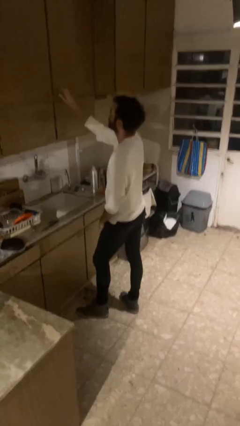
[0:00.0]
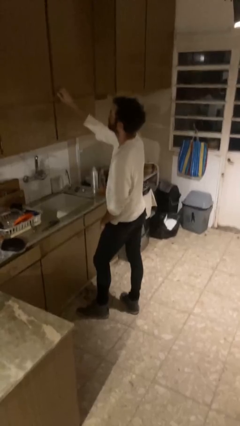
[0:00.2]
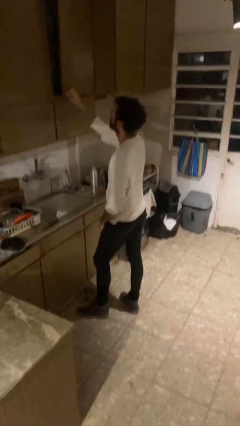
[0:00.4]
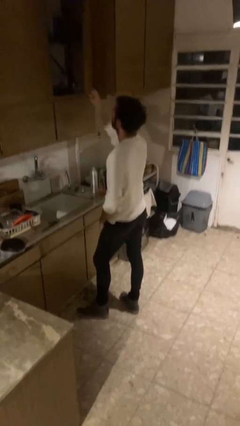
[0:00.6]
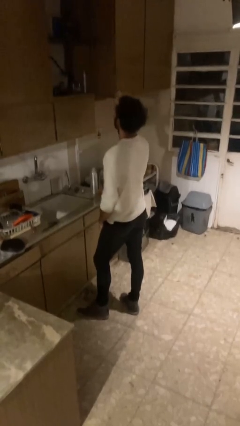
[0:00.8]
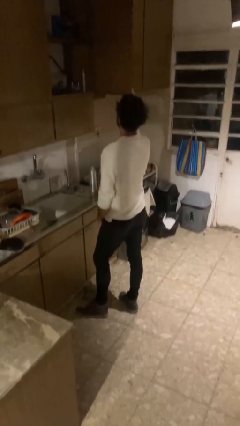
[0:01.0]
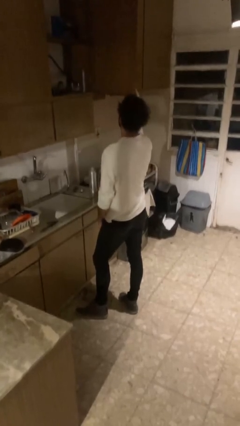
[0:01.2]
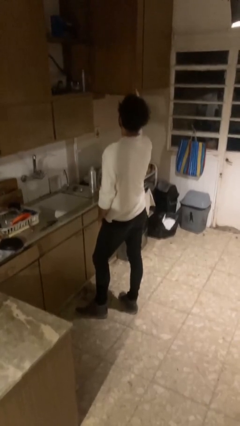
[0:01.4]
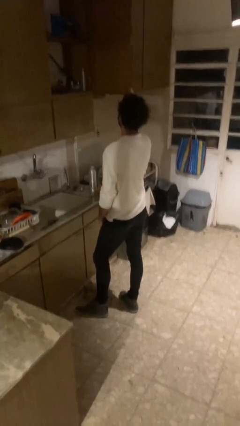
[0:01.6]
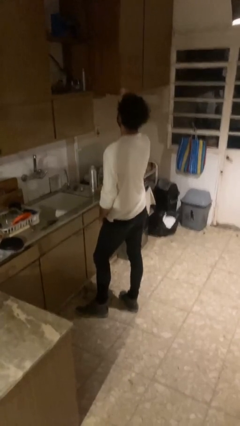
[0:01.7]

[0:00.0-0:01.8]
person closes cabinet

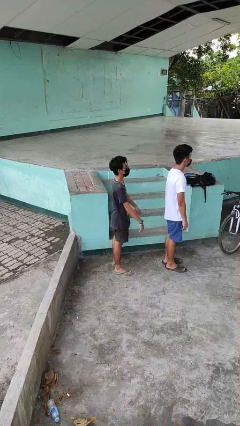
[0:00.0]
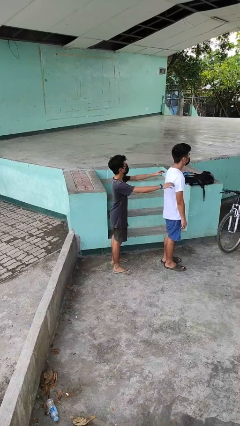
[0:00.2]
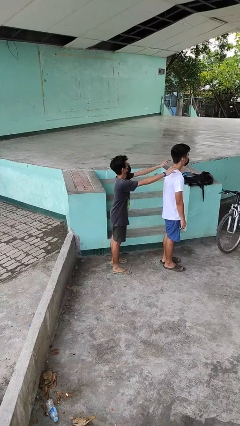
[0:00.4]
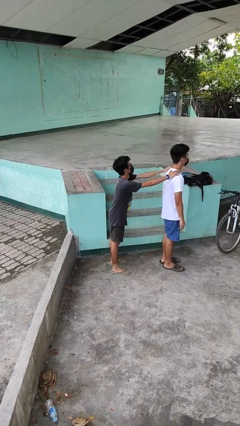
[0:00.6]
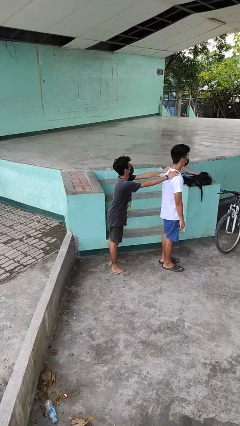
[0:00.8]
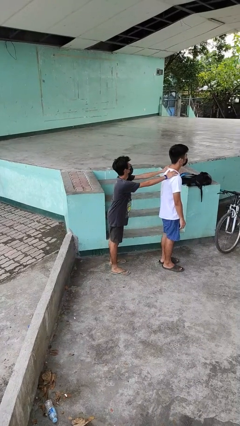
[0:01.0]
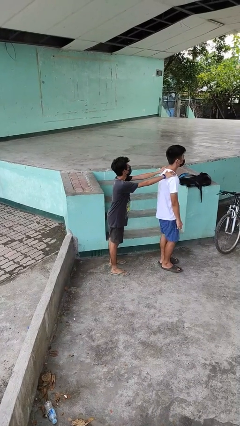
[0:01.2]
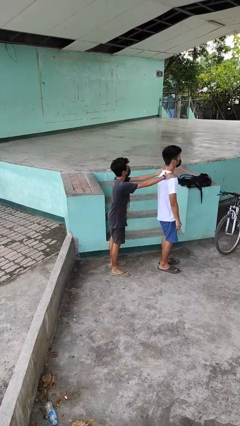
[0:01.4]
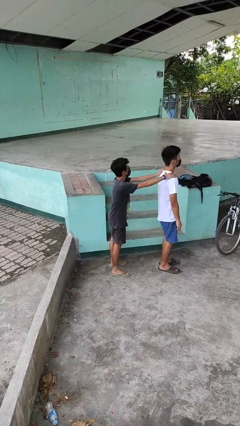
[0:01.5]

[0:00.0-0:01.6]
person grabs person by shoulder

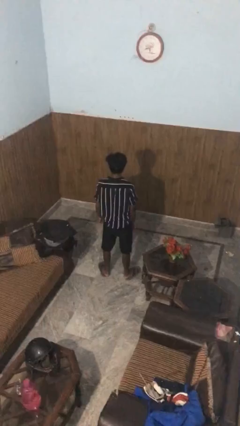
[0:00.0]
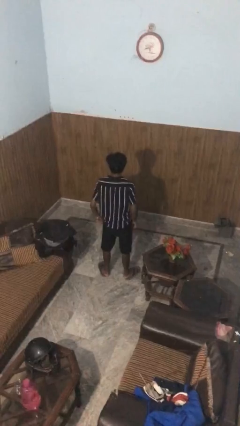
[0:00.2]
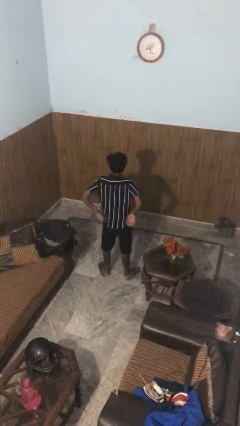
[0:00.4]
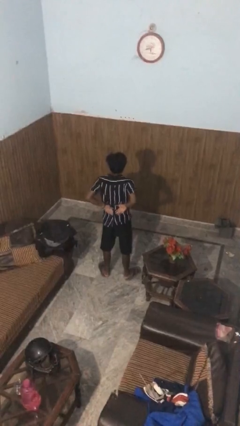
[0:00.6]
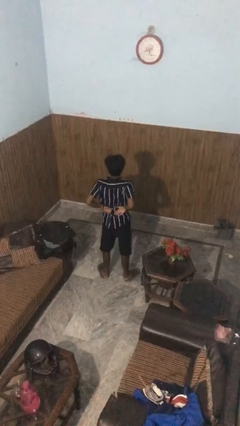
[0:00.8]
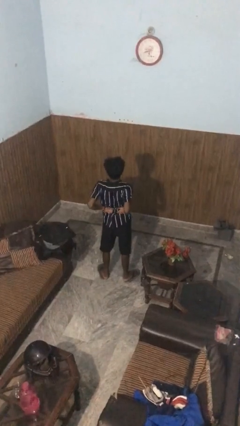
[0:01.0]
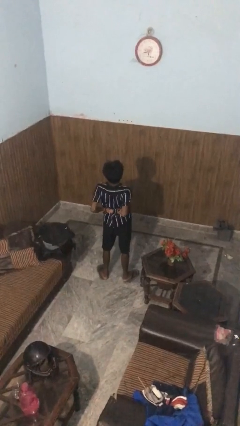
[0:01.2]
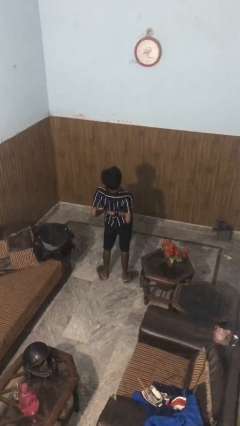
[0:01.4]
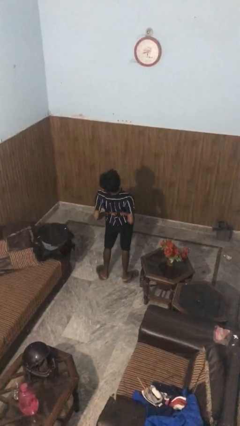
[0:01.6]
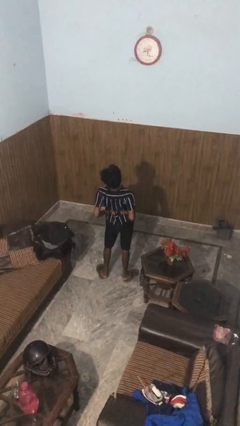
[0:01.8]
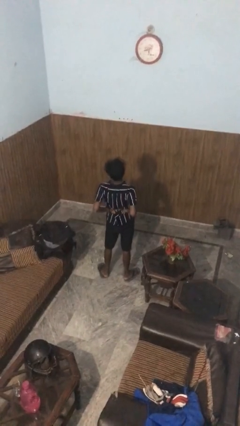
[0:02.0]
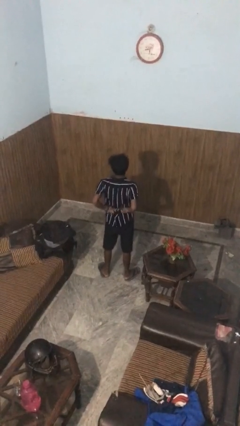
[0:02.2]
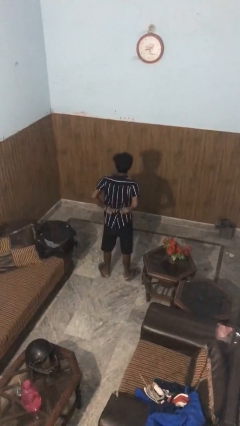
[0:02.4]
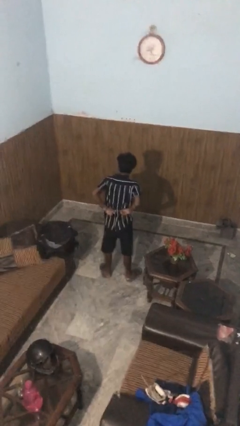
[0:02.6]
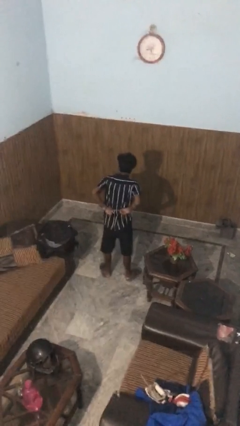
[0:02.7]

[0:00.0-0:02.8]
person stretches back

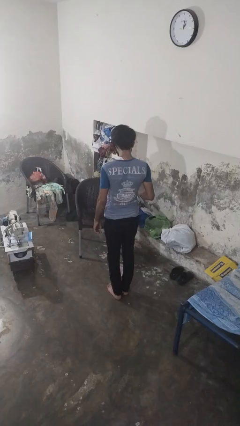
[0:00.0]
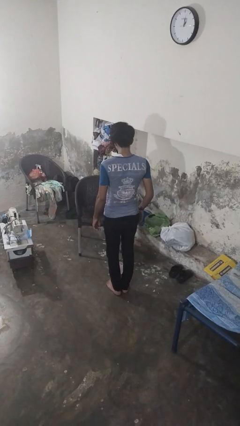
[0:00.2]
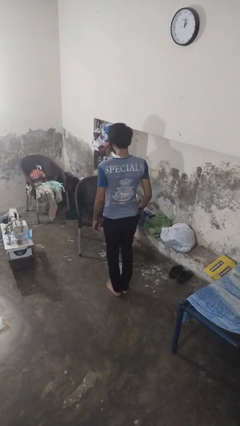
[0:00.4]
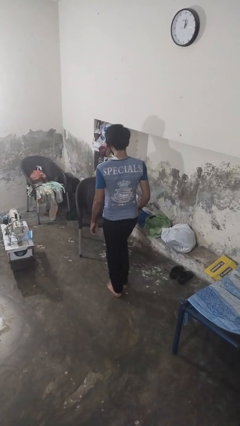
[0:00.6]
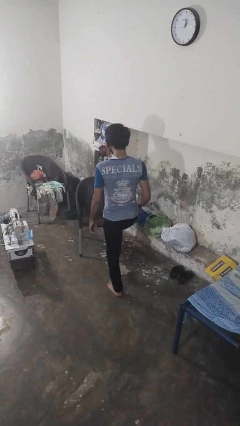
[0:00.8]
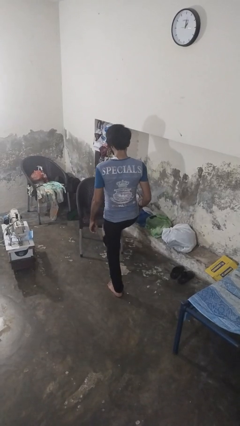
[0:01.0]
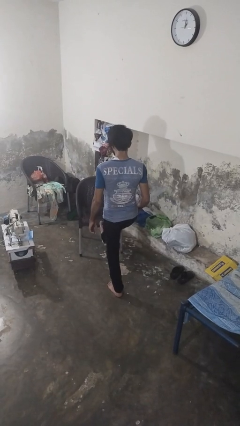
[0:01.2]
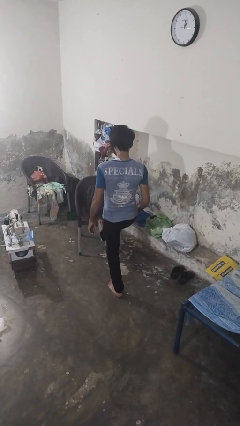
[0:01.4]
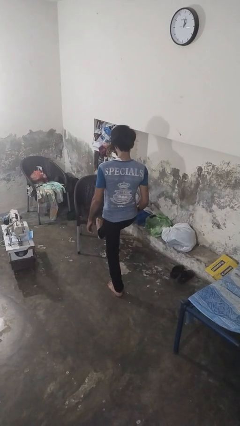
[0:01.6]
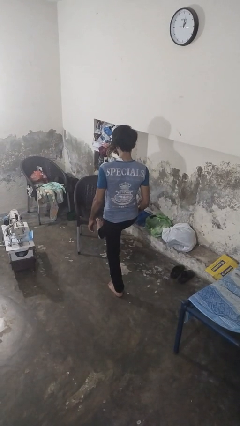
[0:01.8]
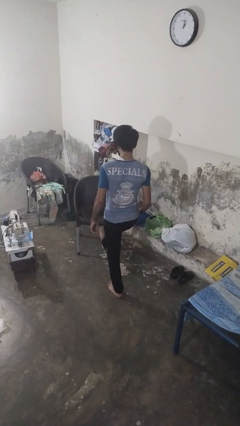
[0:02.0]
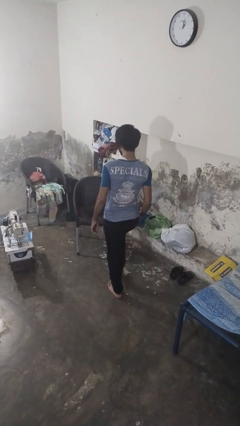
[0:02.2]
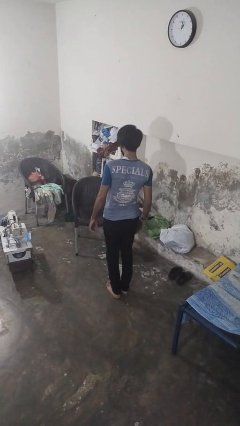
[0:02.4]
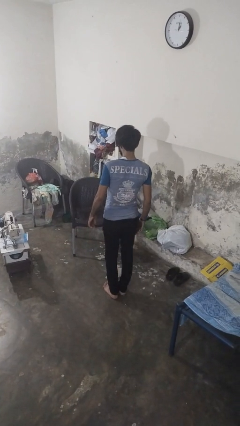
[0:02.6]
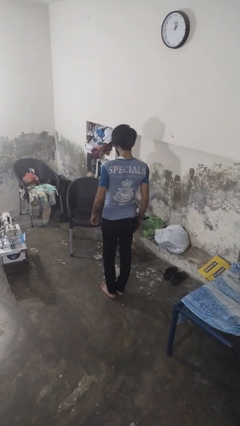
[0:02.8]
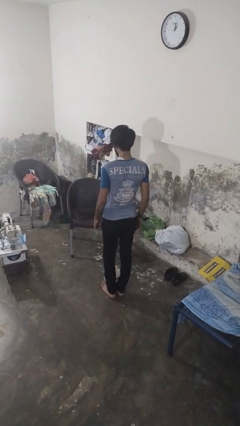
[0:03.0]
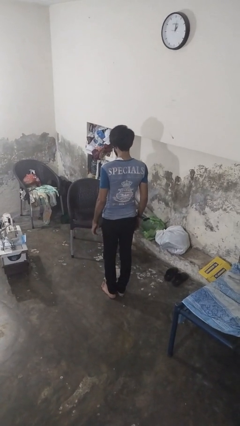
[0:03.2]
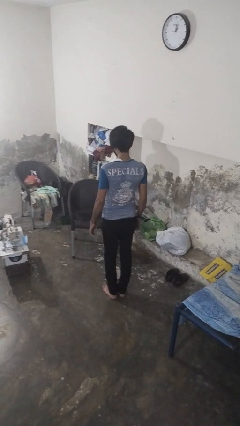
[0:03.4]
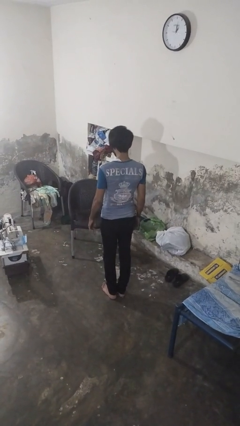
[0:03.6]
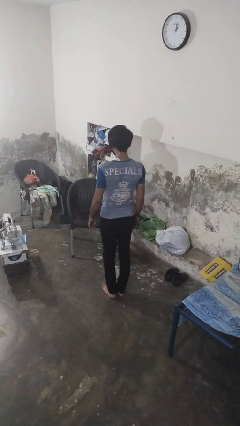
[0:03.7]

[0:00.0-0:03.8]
person stubs toe

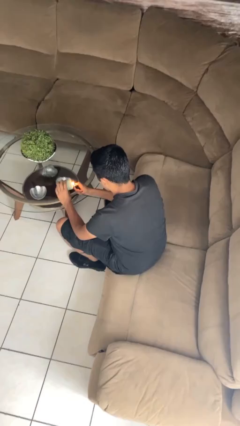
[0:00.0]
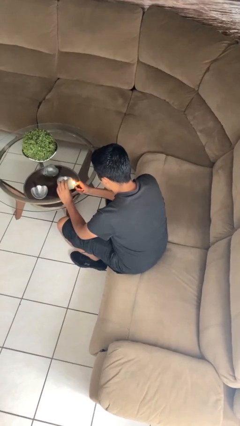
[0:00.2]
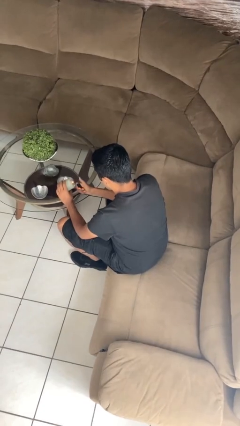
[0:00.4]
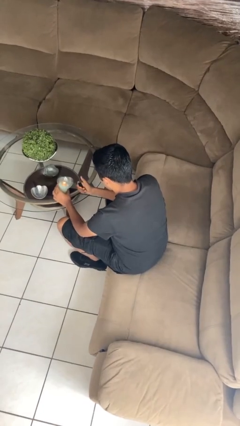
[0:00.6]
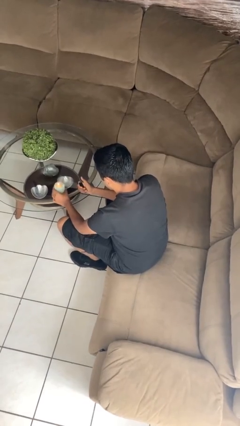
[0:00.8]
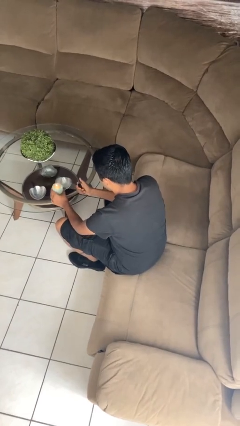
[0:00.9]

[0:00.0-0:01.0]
person lights candle

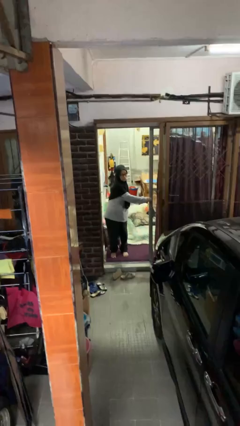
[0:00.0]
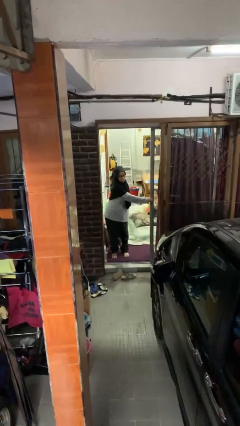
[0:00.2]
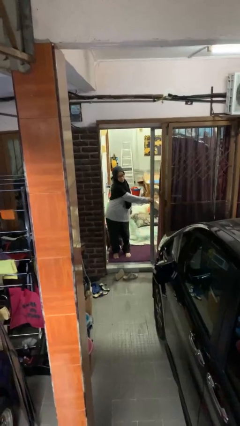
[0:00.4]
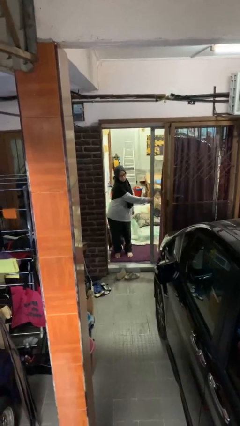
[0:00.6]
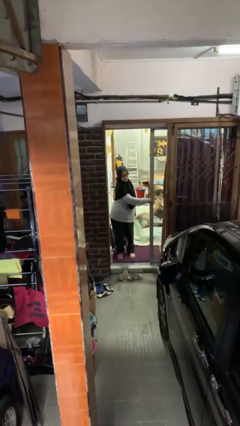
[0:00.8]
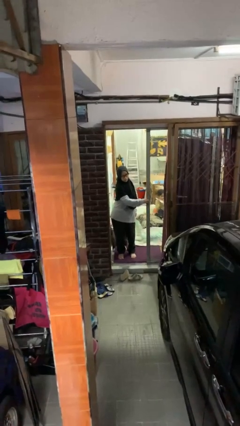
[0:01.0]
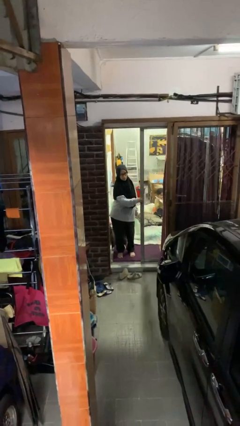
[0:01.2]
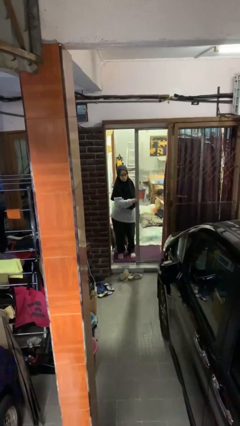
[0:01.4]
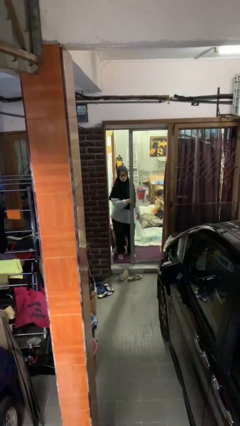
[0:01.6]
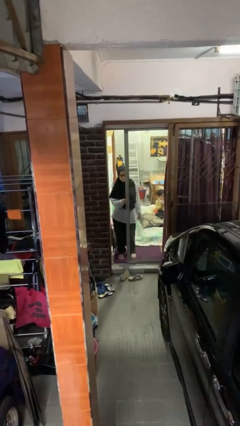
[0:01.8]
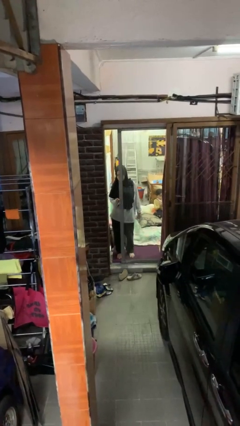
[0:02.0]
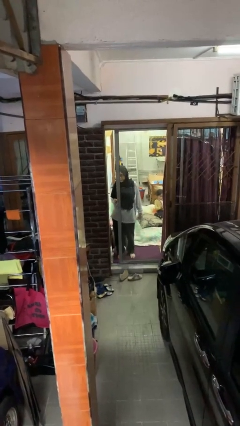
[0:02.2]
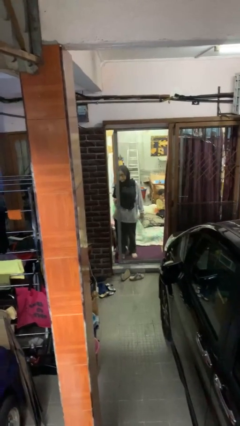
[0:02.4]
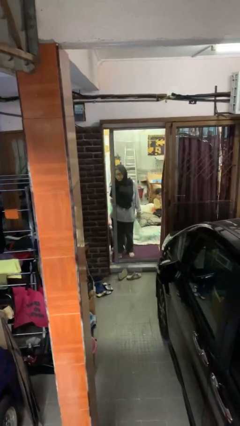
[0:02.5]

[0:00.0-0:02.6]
person closes sliding door

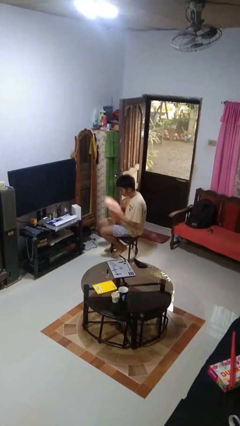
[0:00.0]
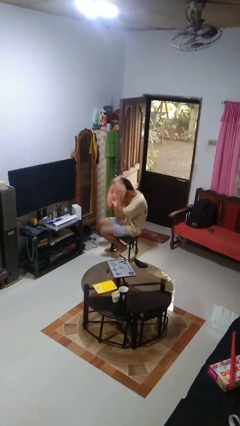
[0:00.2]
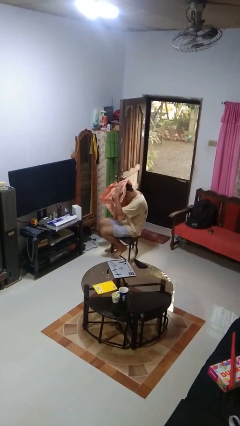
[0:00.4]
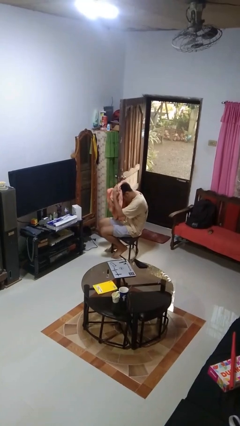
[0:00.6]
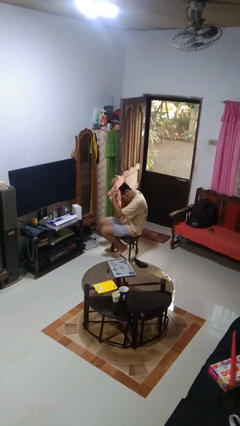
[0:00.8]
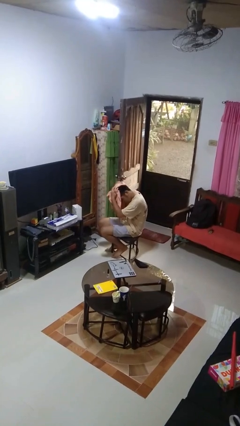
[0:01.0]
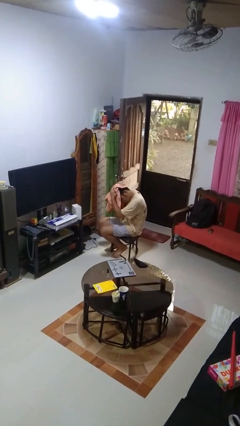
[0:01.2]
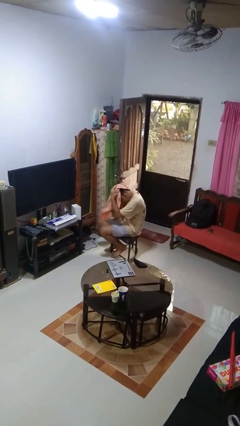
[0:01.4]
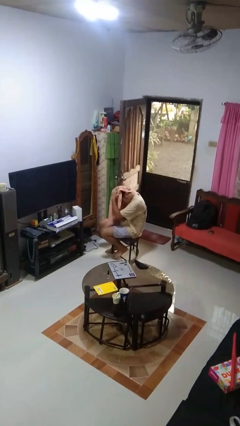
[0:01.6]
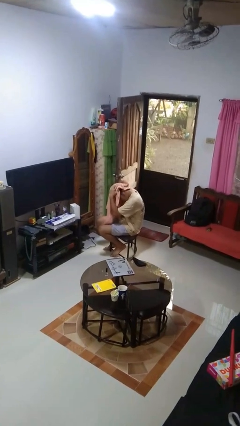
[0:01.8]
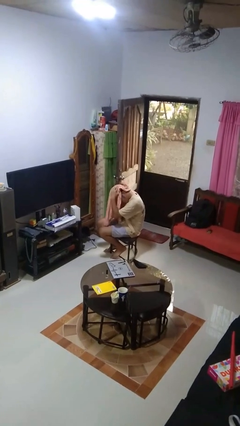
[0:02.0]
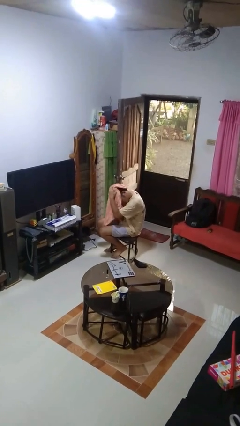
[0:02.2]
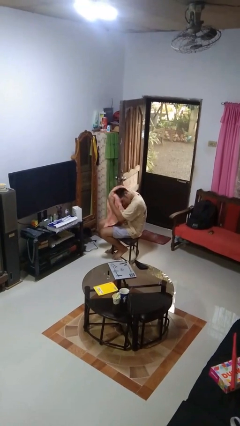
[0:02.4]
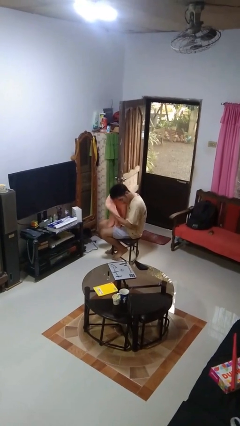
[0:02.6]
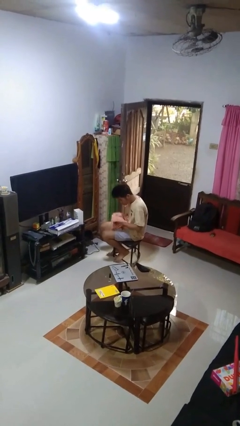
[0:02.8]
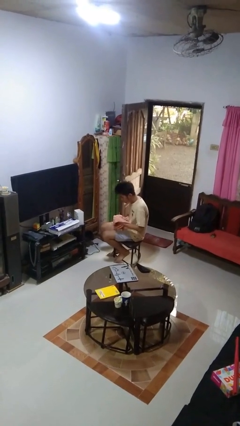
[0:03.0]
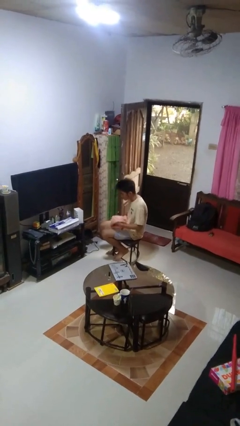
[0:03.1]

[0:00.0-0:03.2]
person dries hair with towel

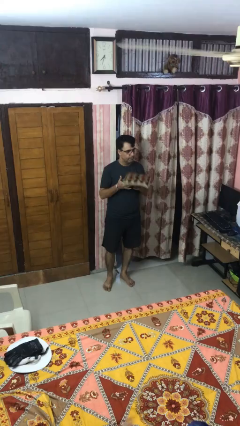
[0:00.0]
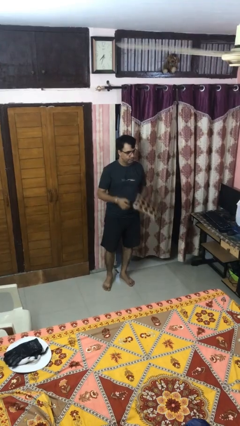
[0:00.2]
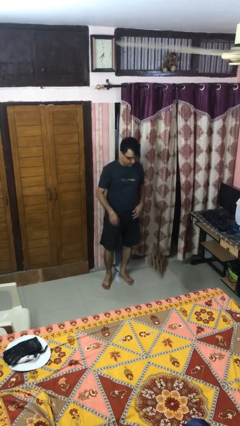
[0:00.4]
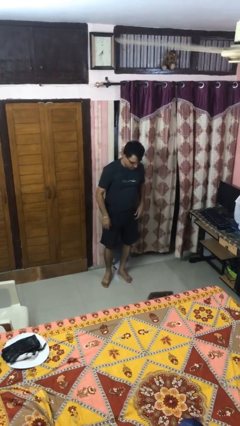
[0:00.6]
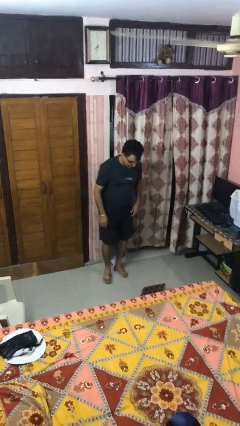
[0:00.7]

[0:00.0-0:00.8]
person drops object
